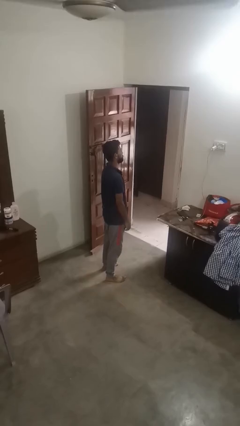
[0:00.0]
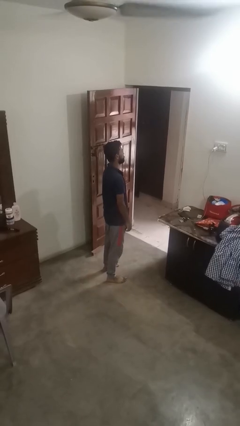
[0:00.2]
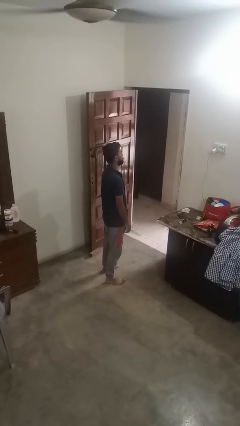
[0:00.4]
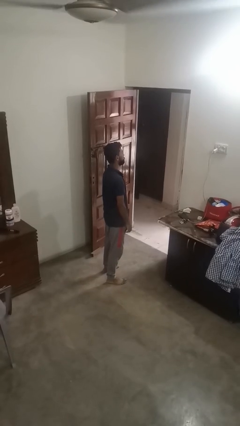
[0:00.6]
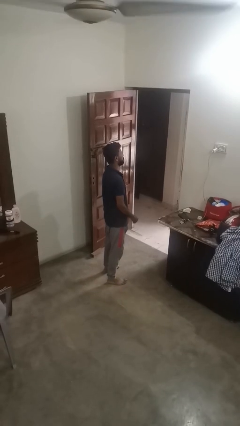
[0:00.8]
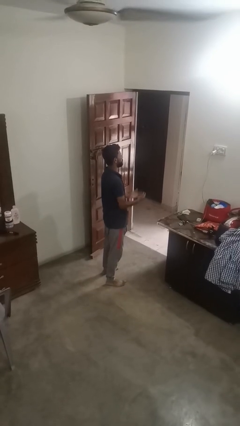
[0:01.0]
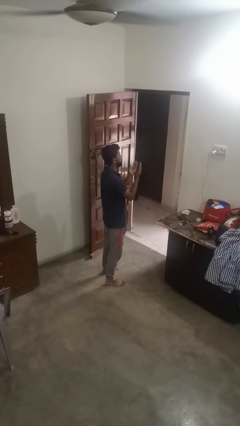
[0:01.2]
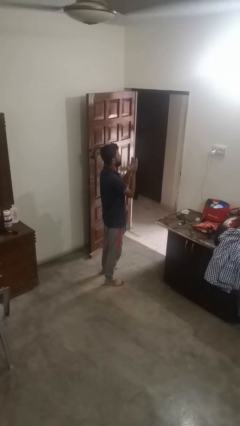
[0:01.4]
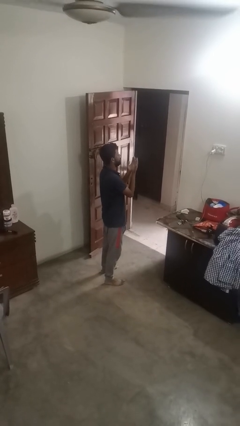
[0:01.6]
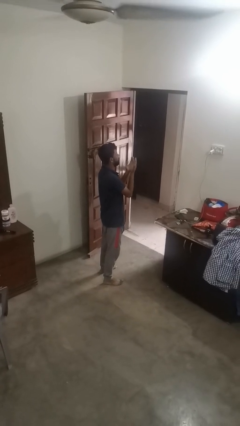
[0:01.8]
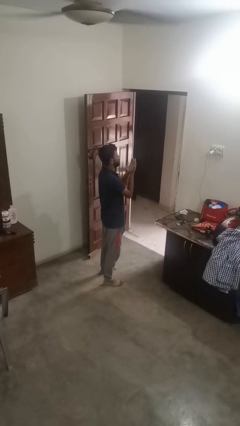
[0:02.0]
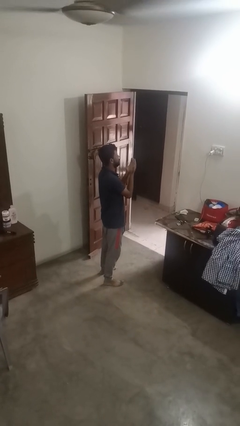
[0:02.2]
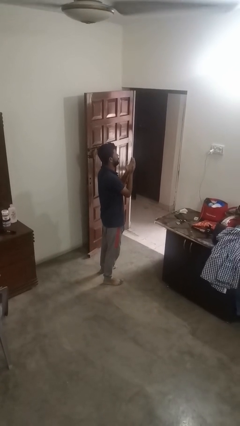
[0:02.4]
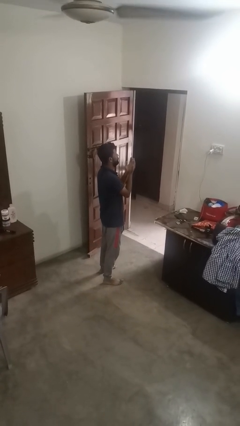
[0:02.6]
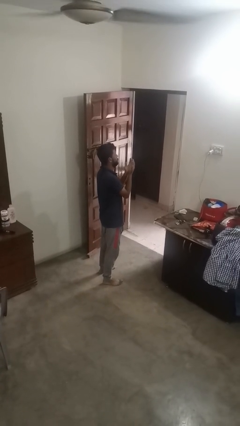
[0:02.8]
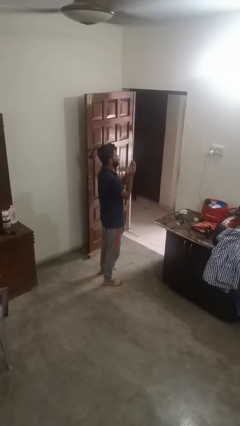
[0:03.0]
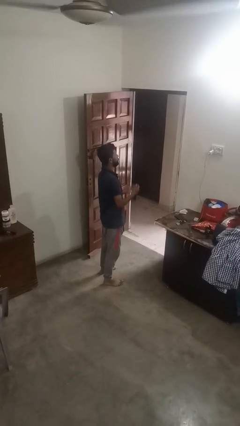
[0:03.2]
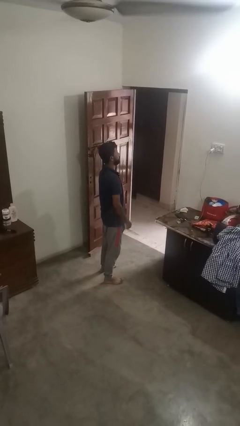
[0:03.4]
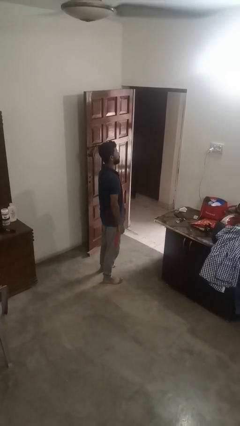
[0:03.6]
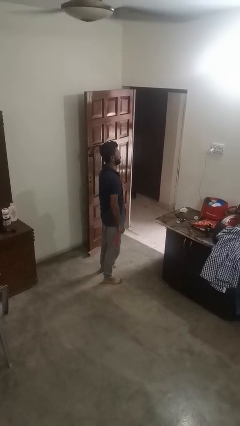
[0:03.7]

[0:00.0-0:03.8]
person prays

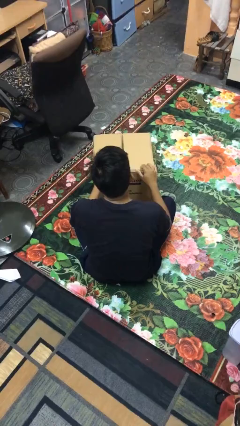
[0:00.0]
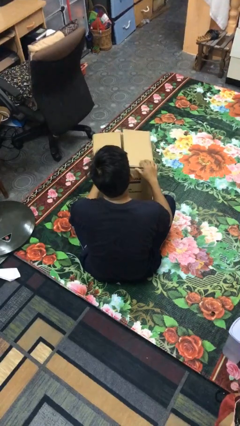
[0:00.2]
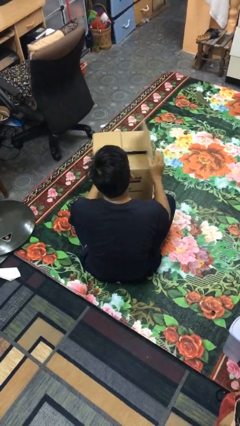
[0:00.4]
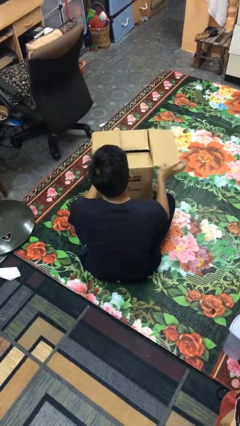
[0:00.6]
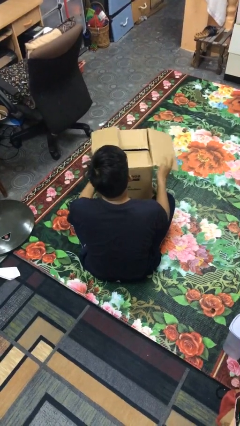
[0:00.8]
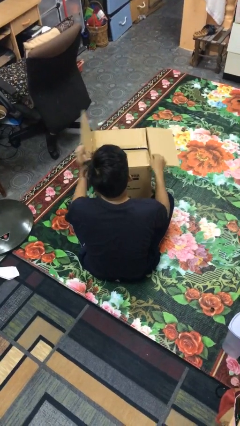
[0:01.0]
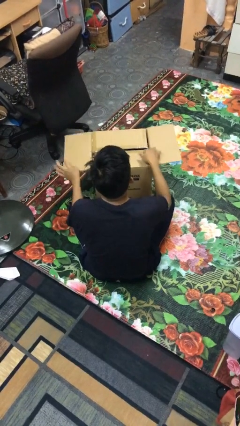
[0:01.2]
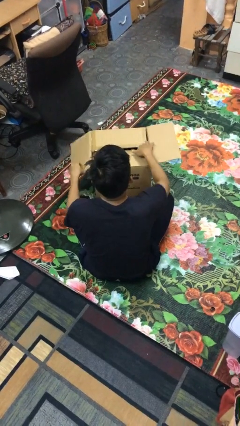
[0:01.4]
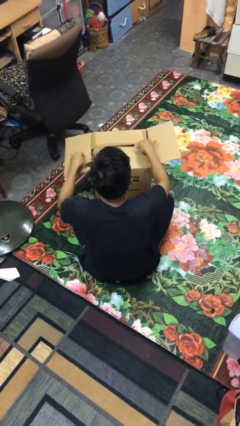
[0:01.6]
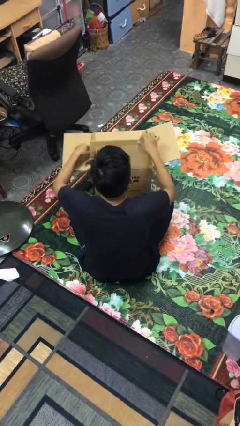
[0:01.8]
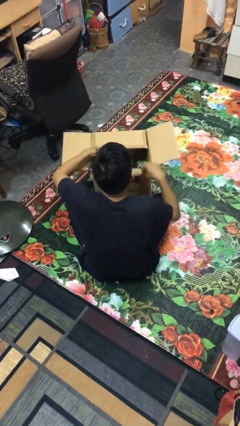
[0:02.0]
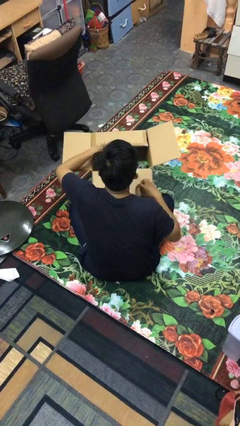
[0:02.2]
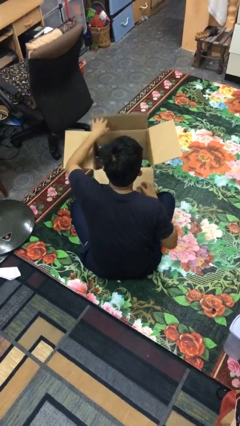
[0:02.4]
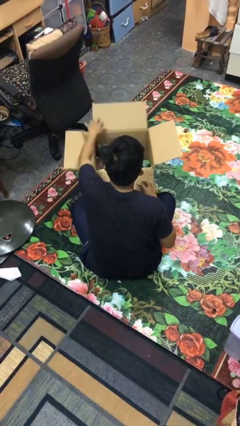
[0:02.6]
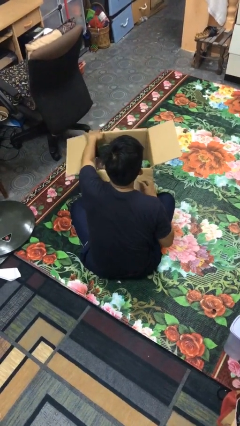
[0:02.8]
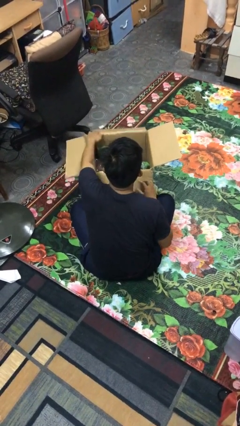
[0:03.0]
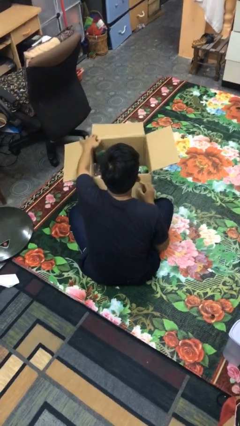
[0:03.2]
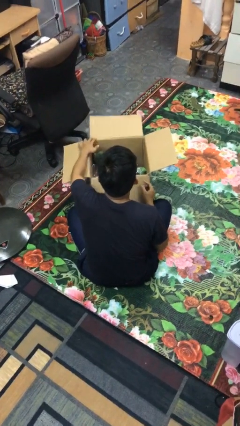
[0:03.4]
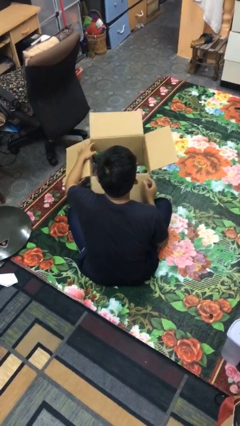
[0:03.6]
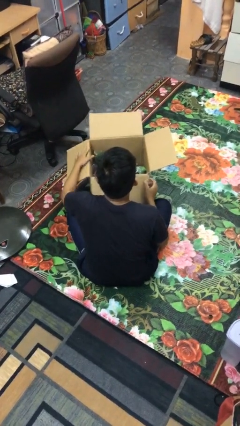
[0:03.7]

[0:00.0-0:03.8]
person opens box

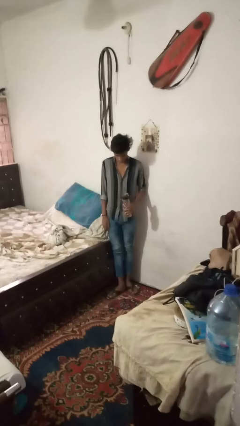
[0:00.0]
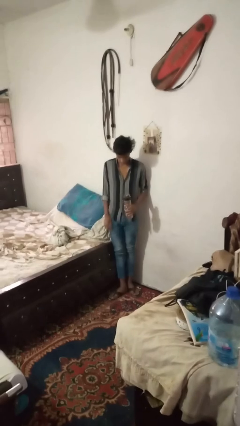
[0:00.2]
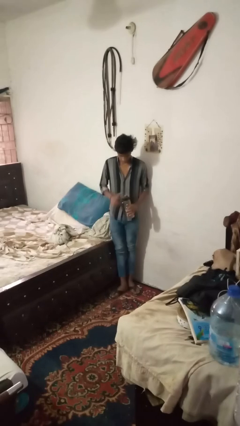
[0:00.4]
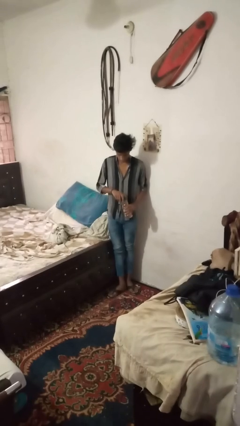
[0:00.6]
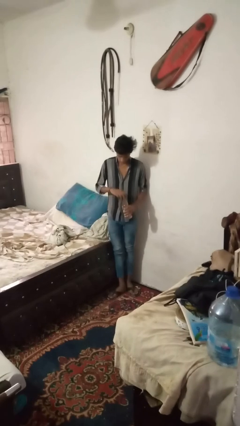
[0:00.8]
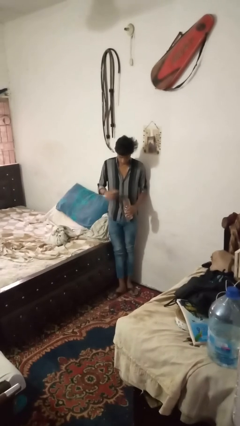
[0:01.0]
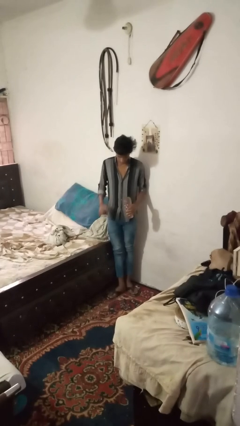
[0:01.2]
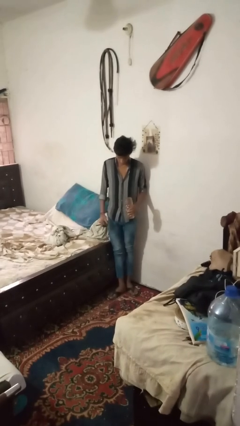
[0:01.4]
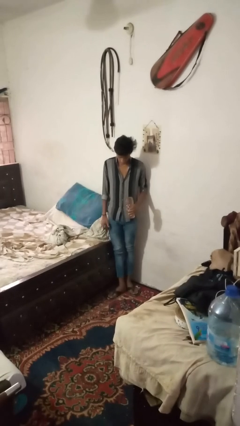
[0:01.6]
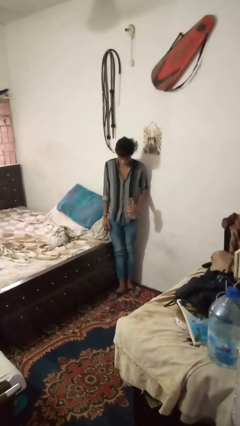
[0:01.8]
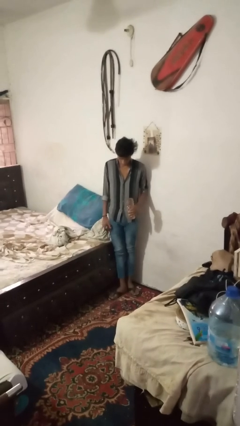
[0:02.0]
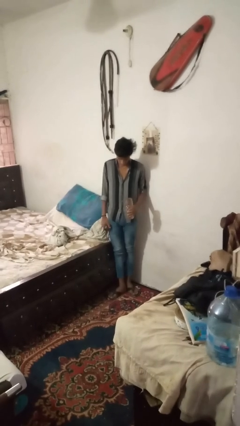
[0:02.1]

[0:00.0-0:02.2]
person unscrews lid from bottle

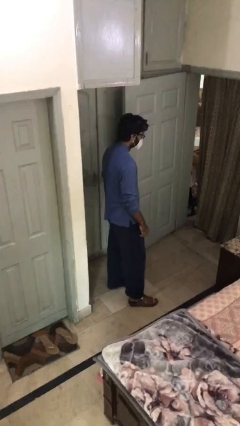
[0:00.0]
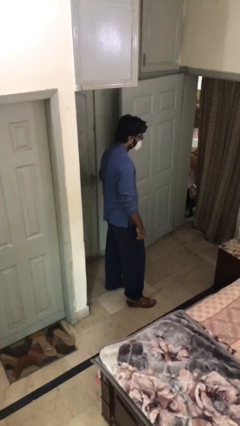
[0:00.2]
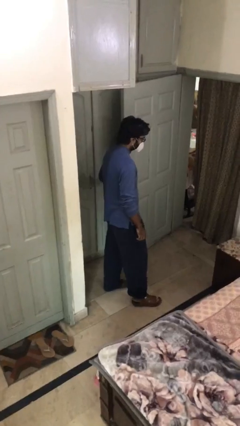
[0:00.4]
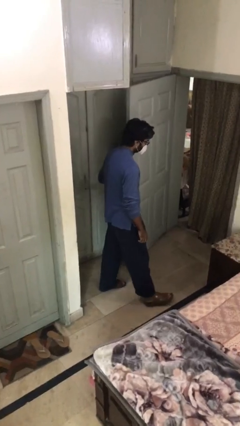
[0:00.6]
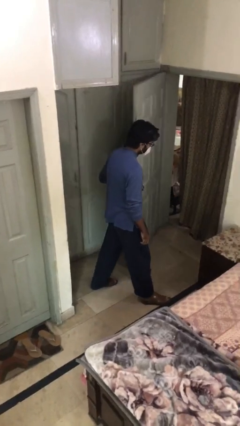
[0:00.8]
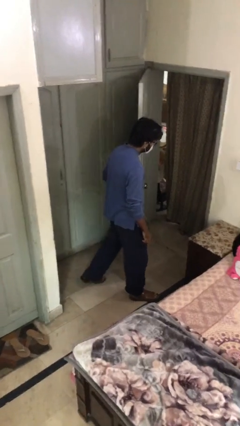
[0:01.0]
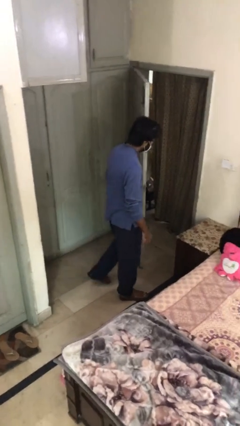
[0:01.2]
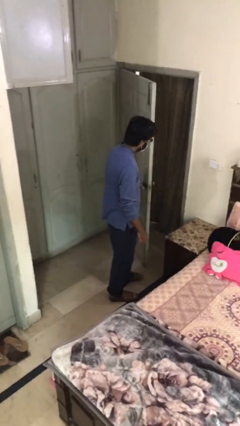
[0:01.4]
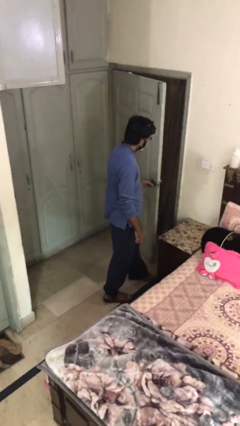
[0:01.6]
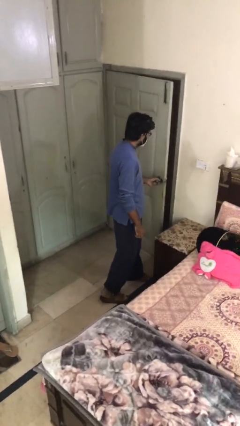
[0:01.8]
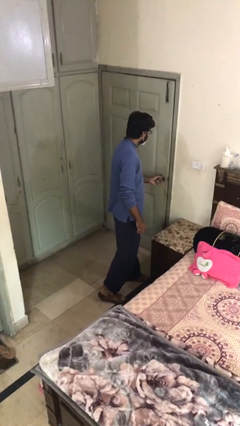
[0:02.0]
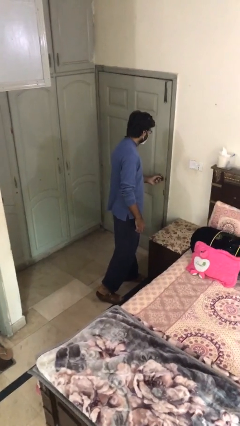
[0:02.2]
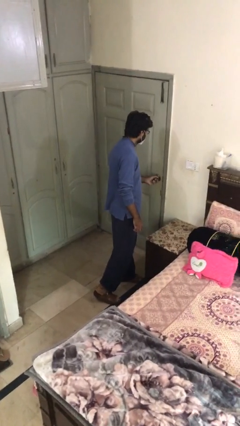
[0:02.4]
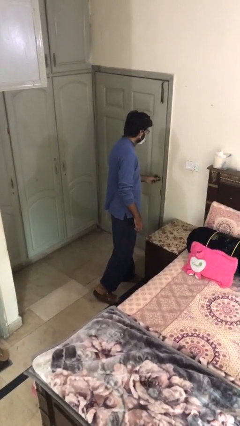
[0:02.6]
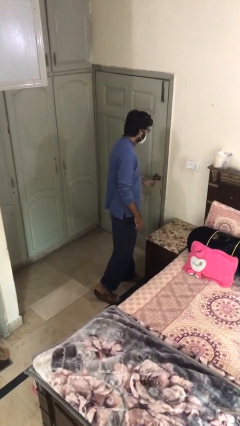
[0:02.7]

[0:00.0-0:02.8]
person closes facility door

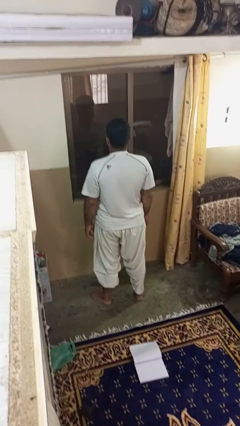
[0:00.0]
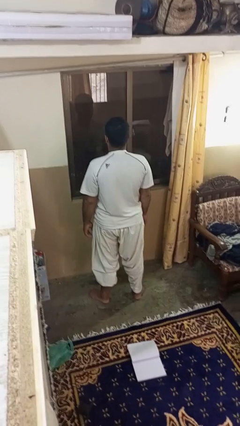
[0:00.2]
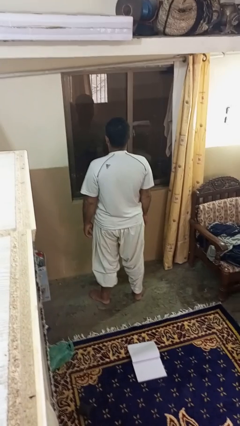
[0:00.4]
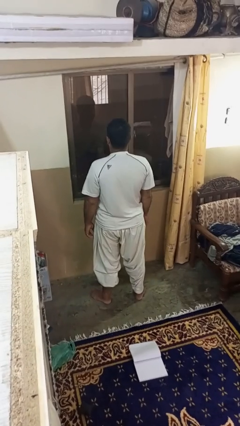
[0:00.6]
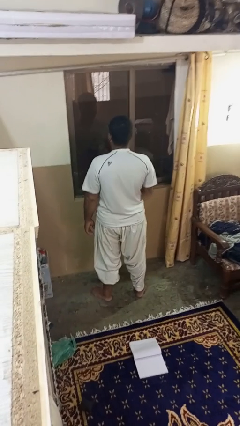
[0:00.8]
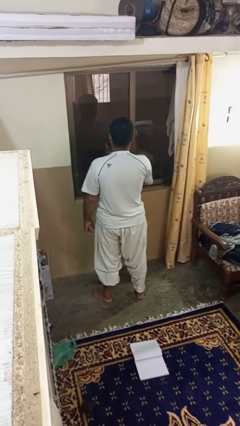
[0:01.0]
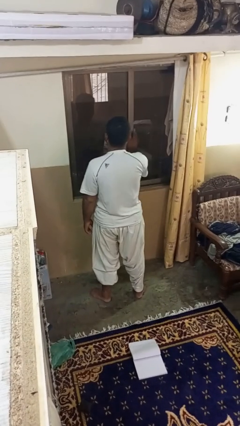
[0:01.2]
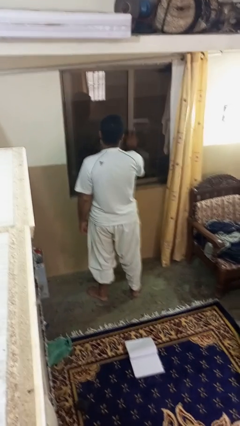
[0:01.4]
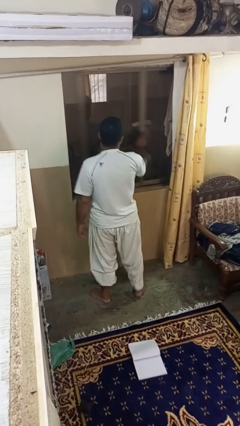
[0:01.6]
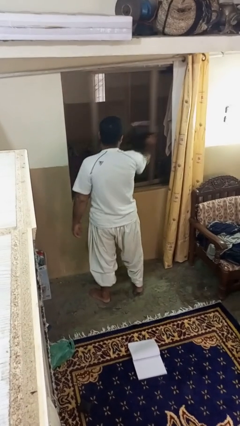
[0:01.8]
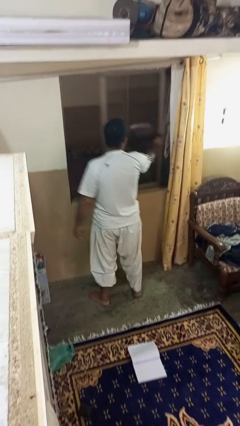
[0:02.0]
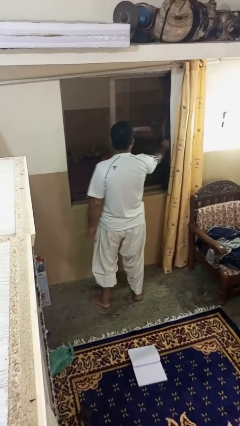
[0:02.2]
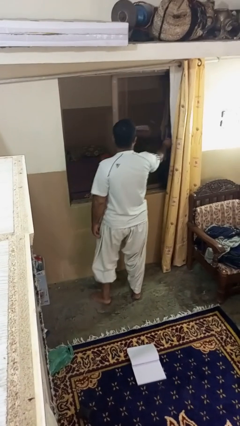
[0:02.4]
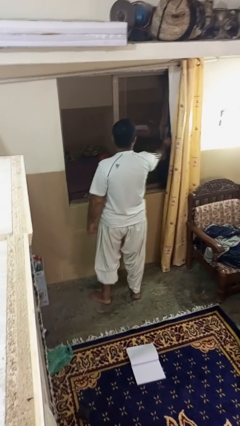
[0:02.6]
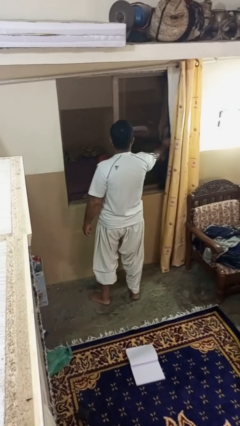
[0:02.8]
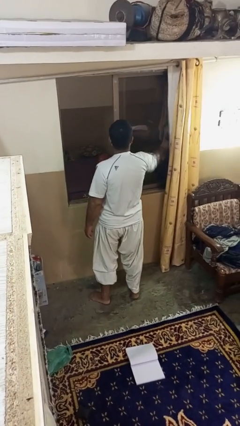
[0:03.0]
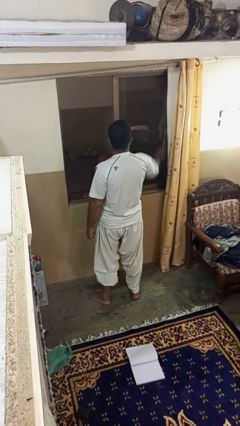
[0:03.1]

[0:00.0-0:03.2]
person opens home window

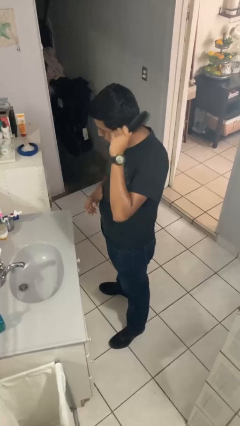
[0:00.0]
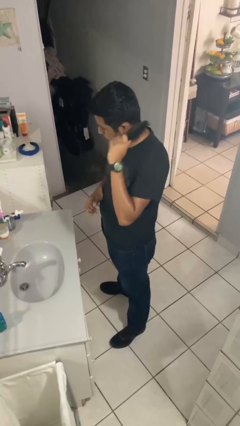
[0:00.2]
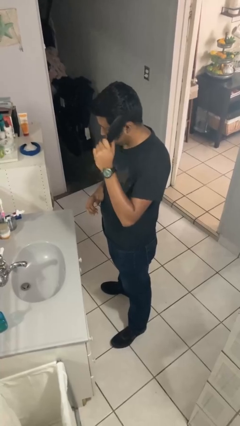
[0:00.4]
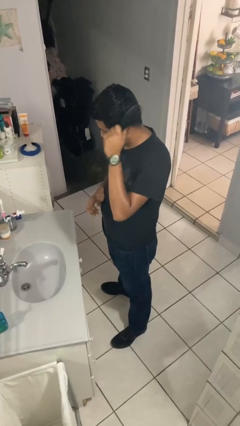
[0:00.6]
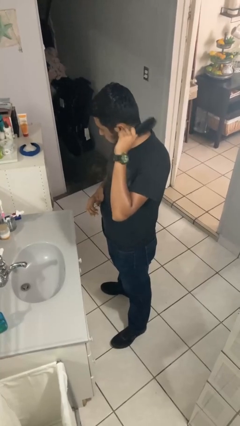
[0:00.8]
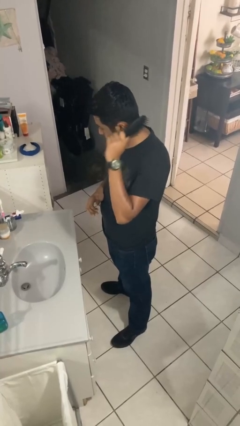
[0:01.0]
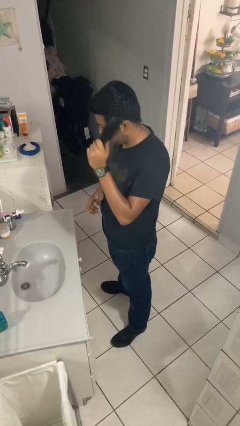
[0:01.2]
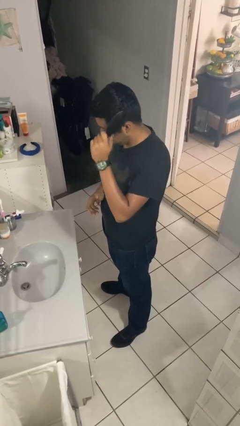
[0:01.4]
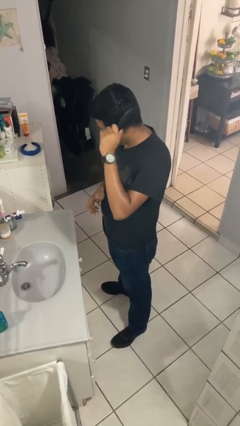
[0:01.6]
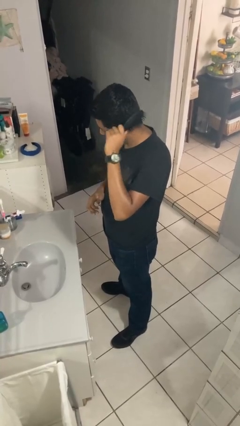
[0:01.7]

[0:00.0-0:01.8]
person brushes hair
